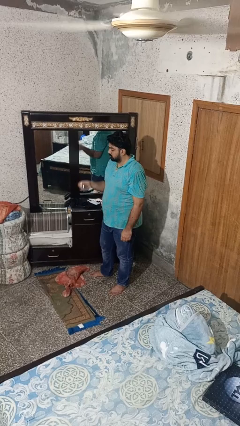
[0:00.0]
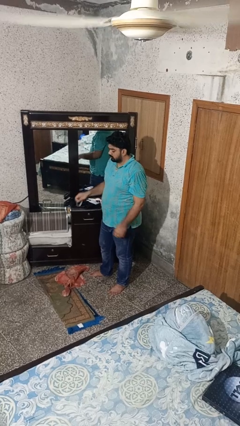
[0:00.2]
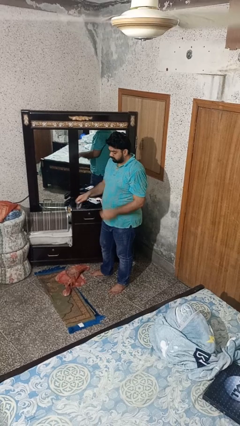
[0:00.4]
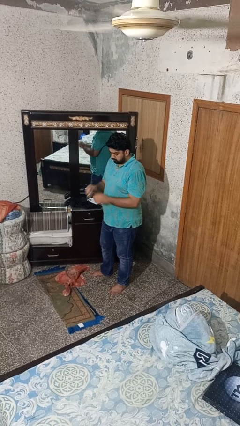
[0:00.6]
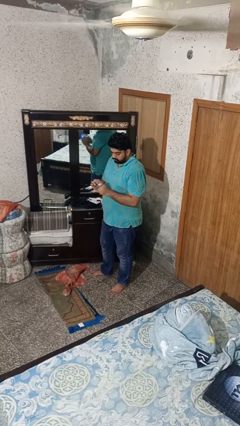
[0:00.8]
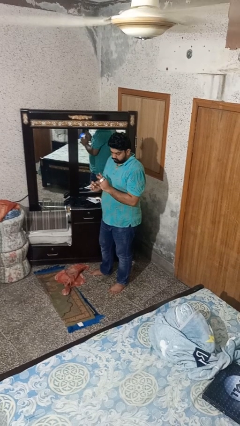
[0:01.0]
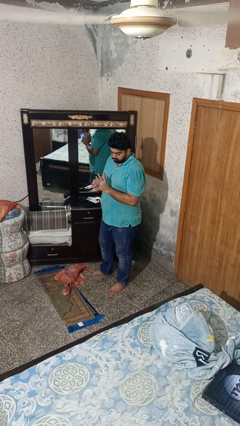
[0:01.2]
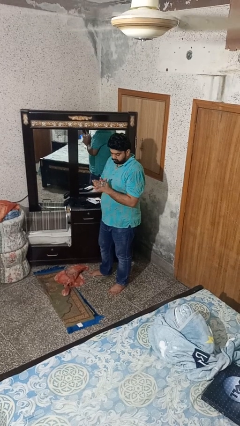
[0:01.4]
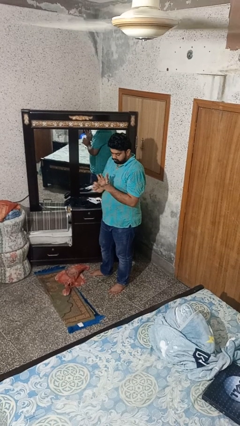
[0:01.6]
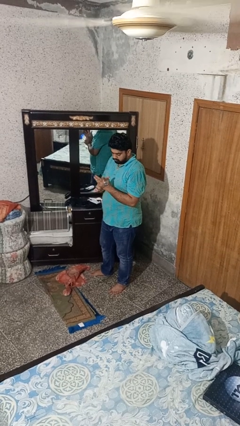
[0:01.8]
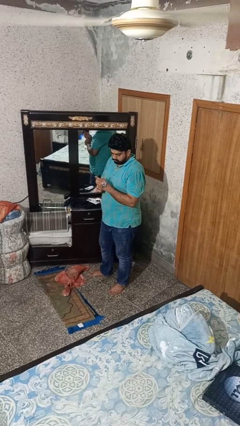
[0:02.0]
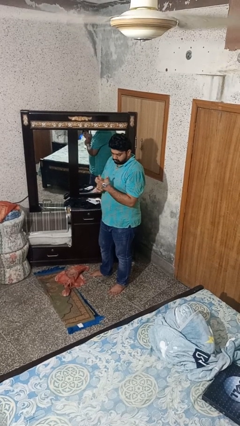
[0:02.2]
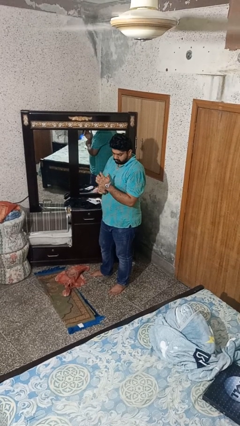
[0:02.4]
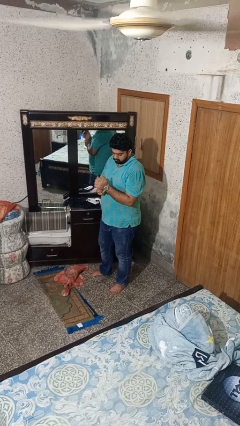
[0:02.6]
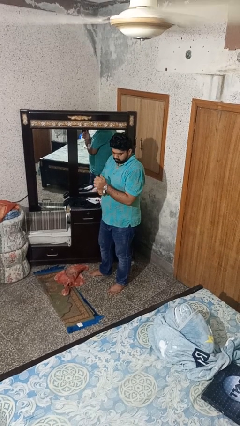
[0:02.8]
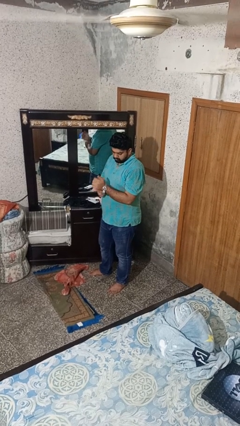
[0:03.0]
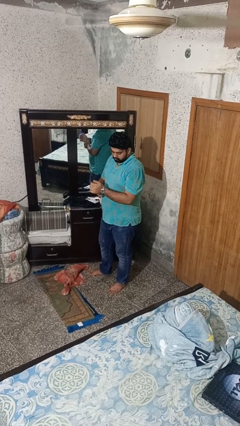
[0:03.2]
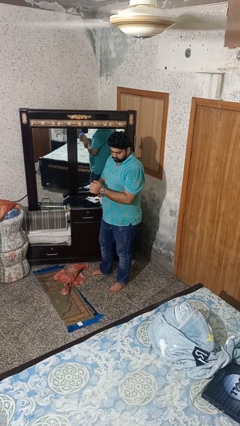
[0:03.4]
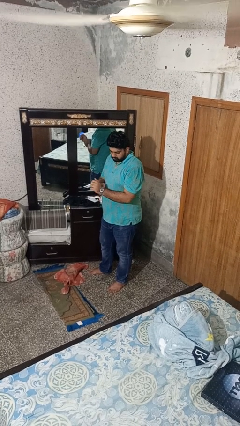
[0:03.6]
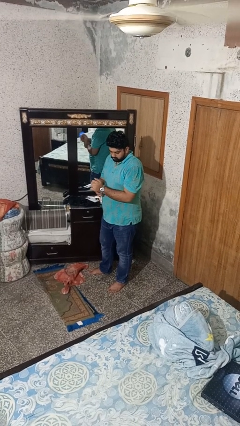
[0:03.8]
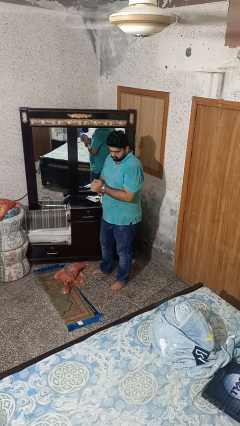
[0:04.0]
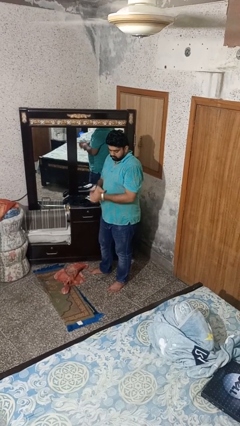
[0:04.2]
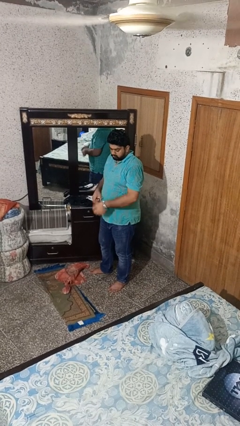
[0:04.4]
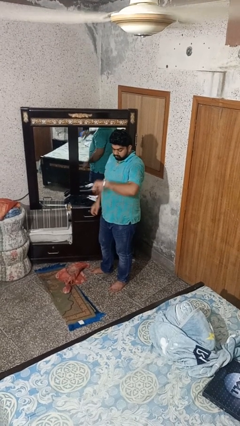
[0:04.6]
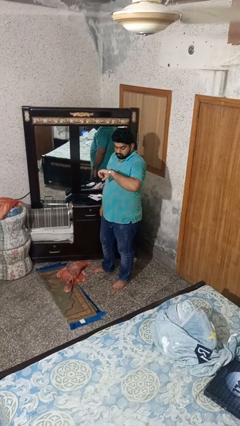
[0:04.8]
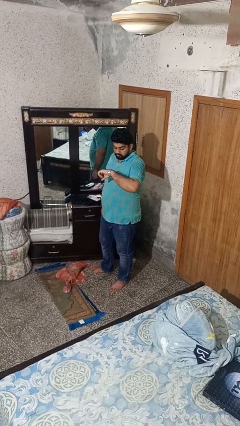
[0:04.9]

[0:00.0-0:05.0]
person puts on wristwatch

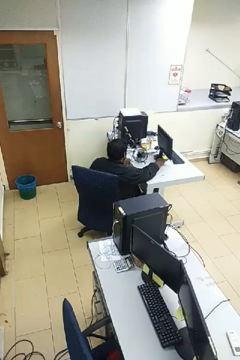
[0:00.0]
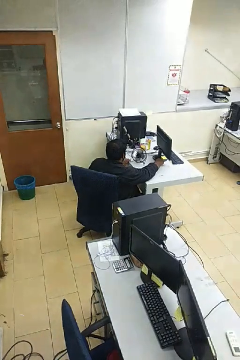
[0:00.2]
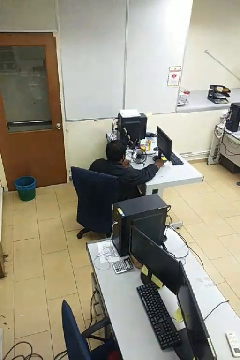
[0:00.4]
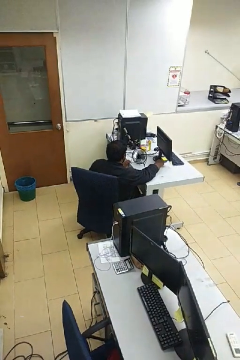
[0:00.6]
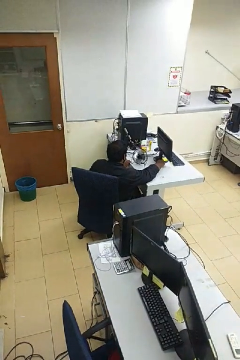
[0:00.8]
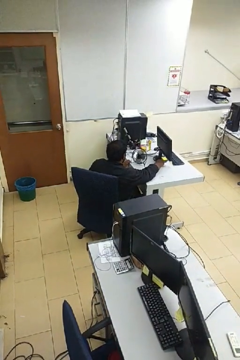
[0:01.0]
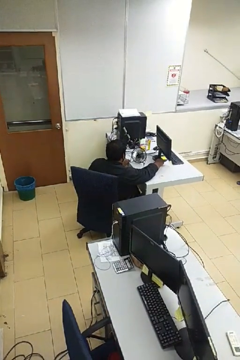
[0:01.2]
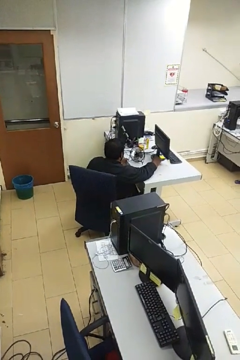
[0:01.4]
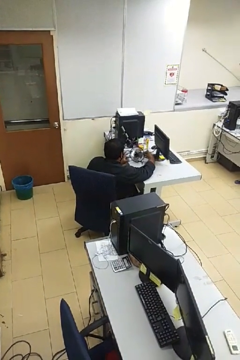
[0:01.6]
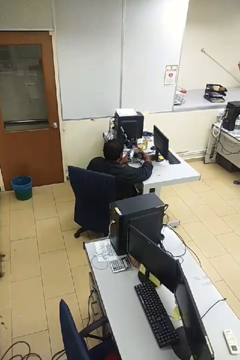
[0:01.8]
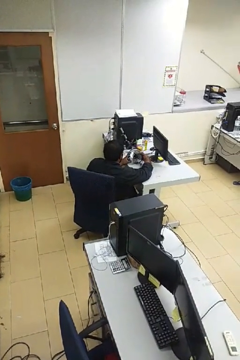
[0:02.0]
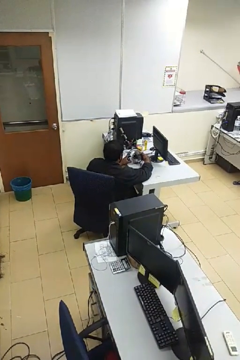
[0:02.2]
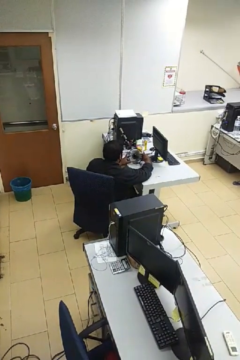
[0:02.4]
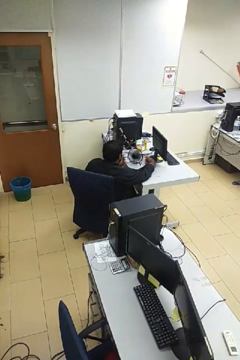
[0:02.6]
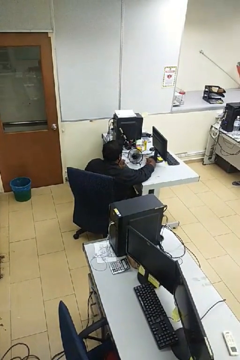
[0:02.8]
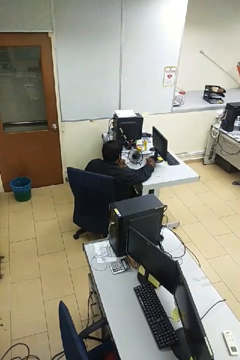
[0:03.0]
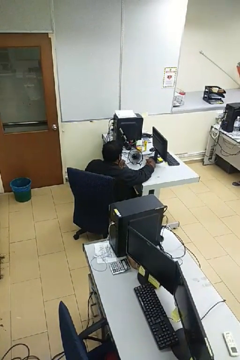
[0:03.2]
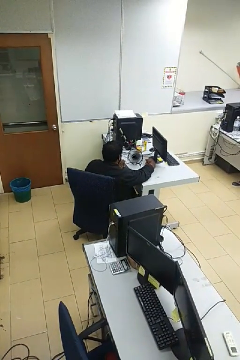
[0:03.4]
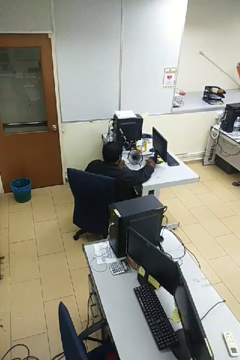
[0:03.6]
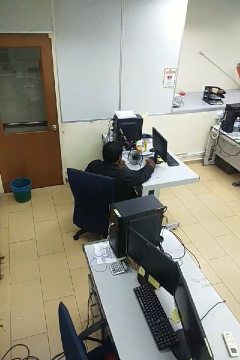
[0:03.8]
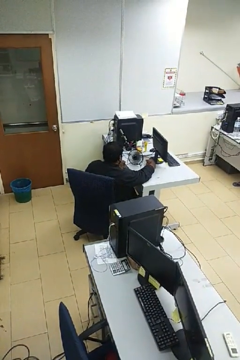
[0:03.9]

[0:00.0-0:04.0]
person turns on fan

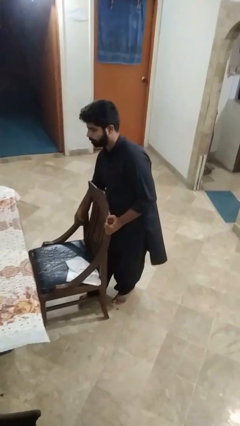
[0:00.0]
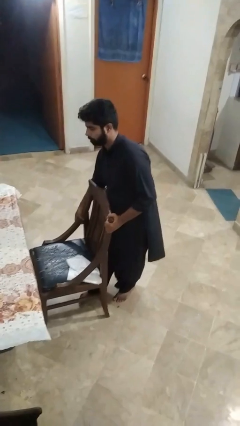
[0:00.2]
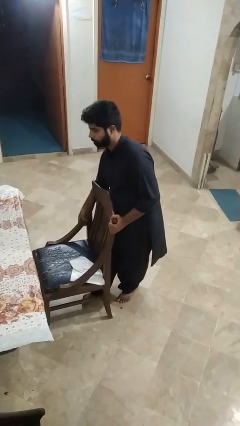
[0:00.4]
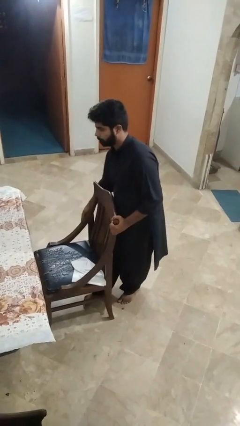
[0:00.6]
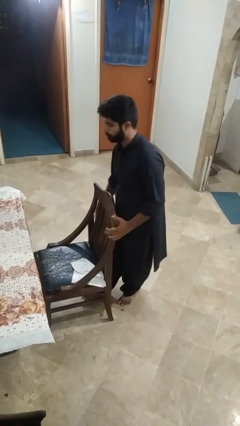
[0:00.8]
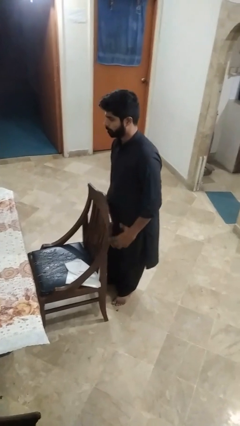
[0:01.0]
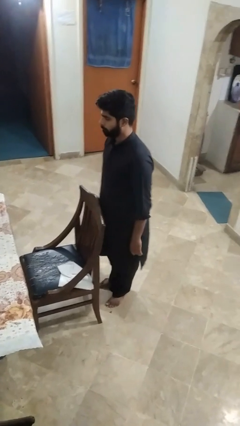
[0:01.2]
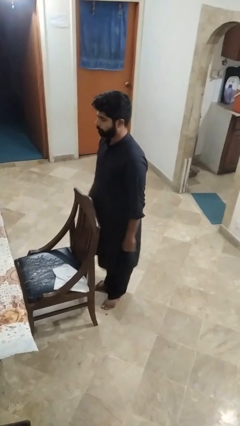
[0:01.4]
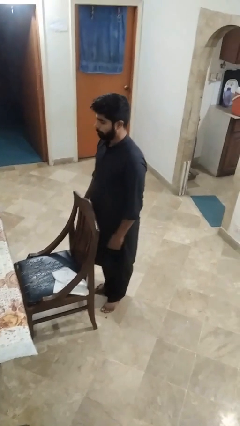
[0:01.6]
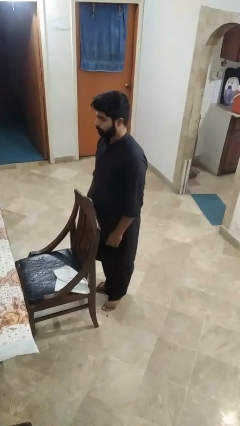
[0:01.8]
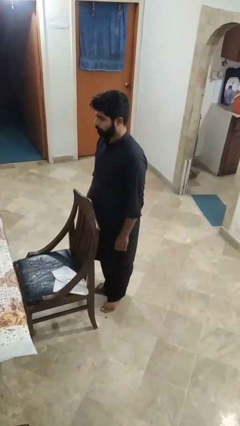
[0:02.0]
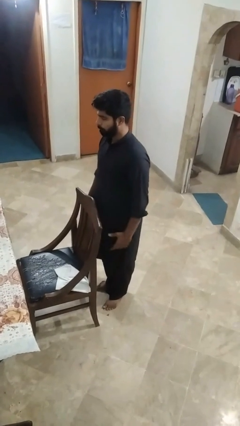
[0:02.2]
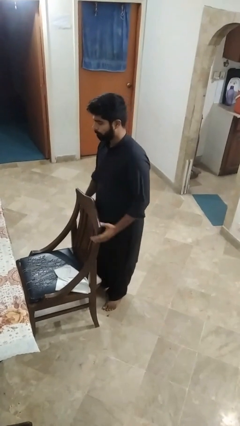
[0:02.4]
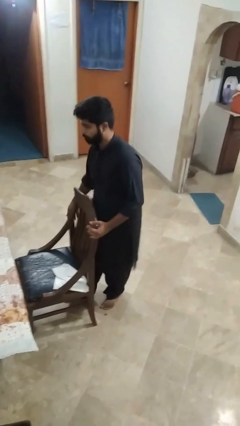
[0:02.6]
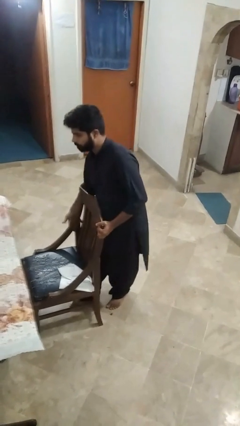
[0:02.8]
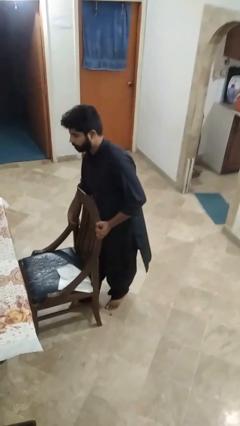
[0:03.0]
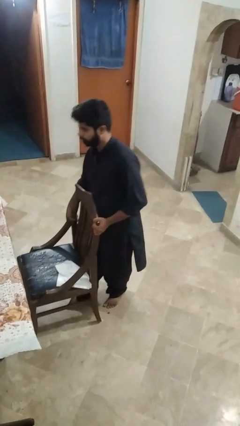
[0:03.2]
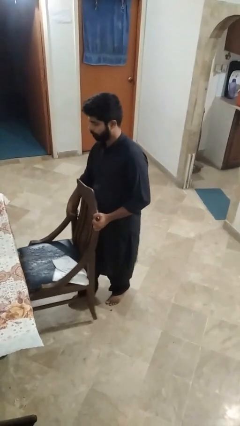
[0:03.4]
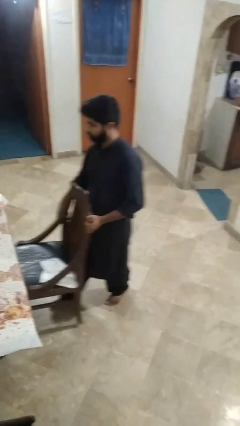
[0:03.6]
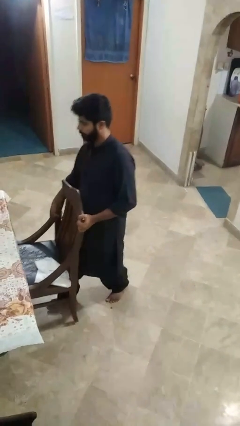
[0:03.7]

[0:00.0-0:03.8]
person pulls out chair

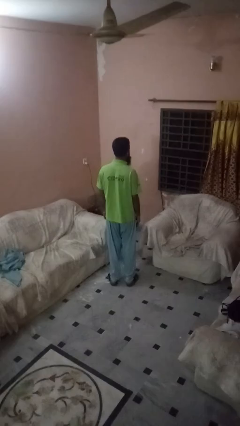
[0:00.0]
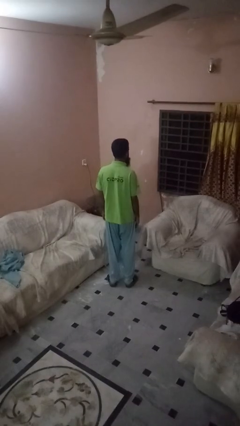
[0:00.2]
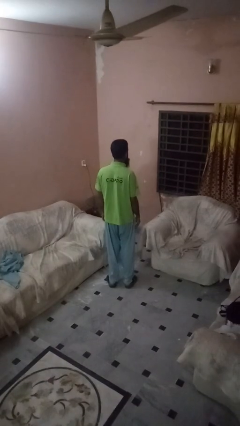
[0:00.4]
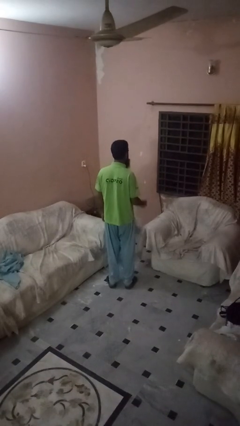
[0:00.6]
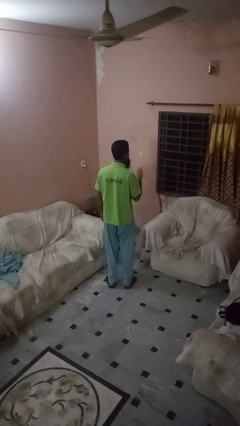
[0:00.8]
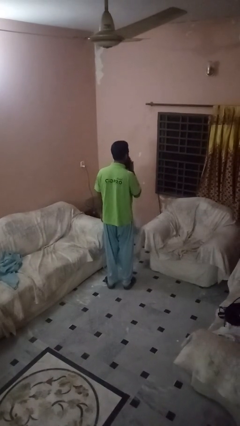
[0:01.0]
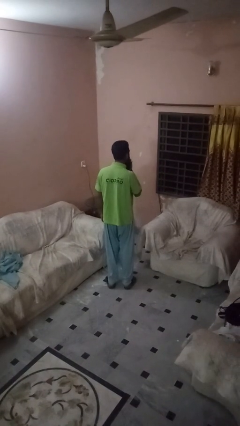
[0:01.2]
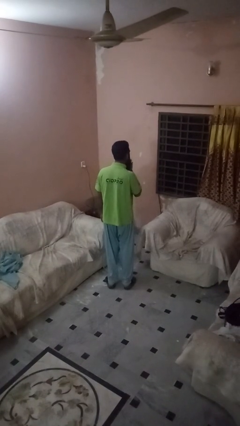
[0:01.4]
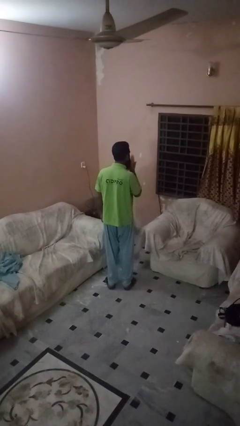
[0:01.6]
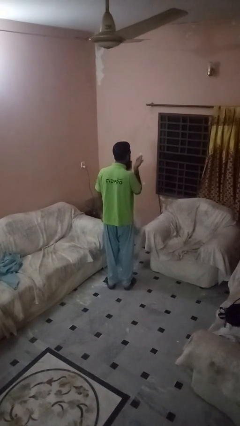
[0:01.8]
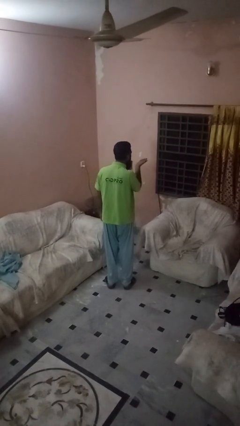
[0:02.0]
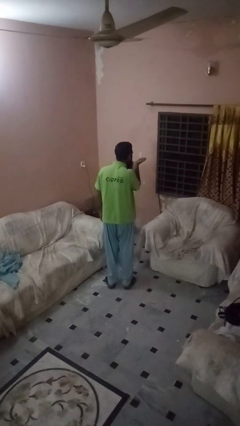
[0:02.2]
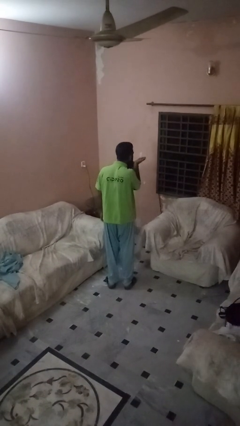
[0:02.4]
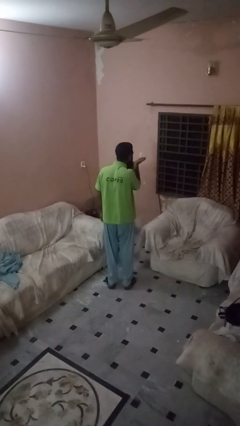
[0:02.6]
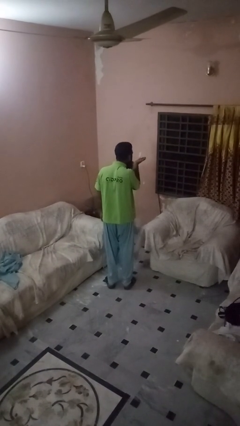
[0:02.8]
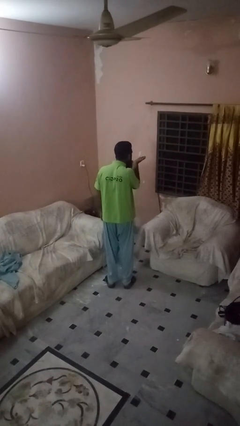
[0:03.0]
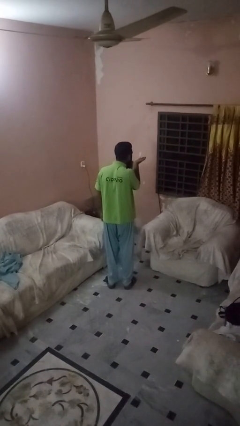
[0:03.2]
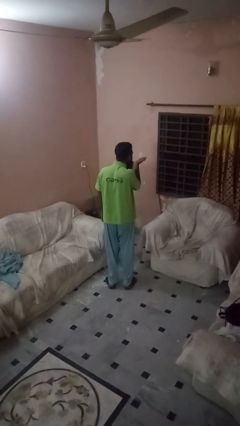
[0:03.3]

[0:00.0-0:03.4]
person gestures blow kiss

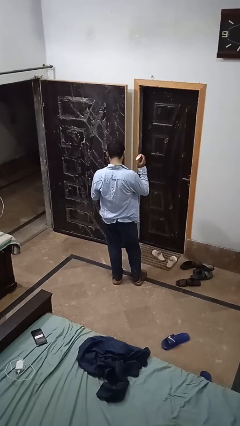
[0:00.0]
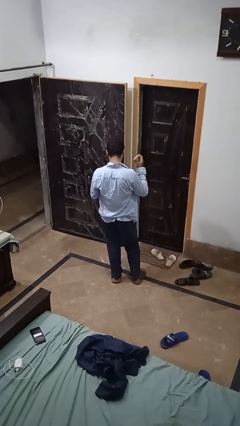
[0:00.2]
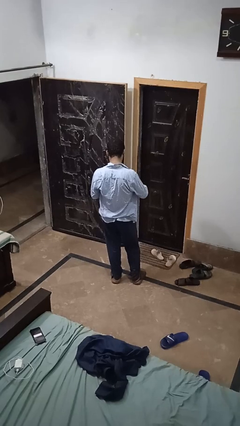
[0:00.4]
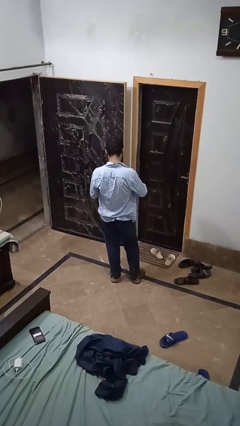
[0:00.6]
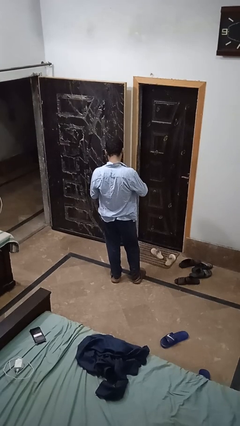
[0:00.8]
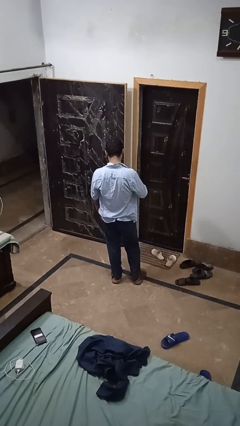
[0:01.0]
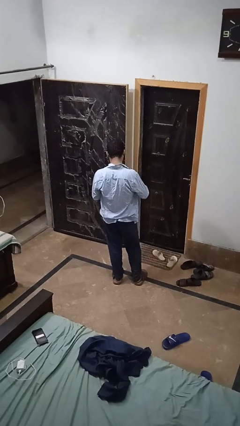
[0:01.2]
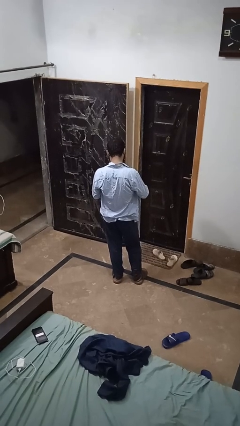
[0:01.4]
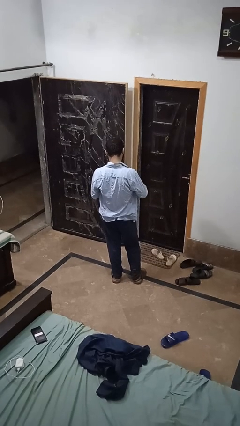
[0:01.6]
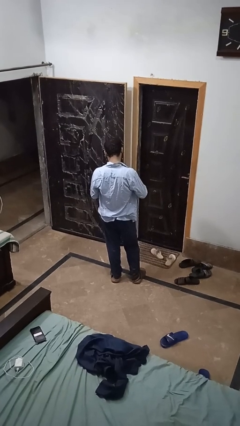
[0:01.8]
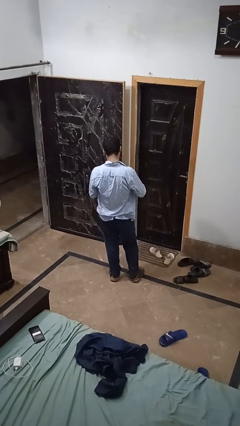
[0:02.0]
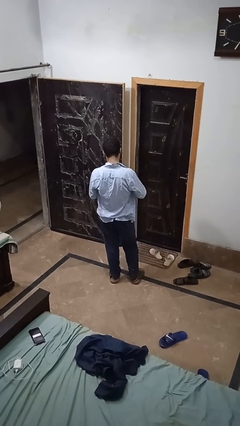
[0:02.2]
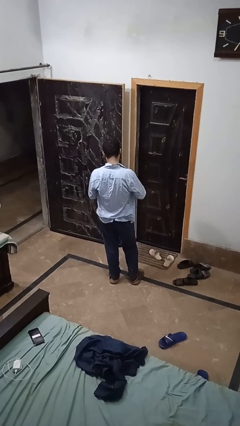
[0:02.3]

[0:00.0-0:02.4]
person closes jar
